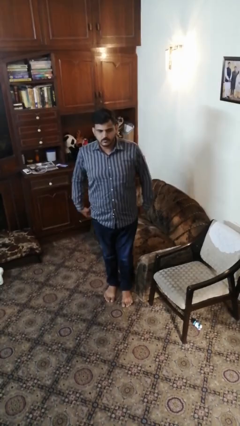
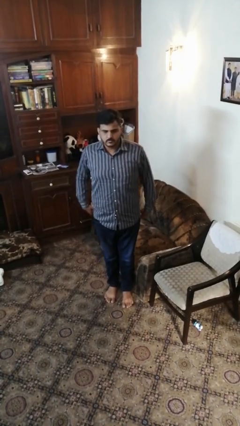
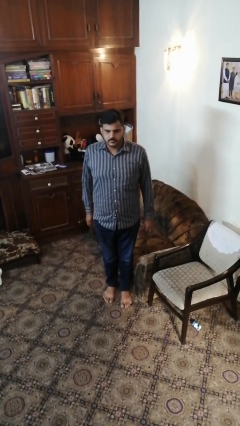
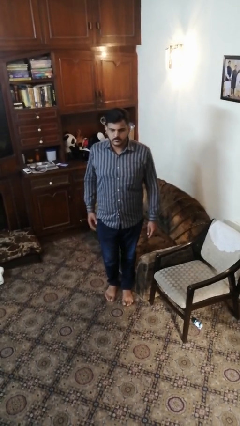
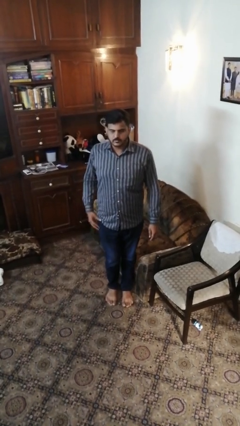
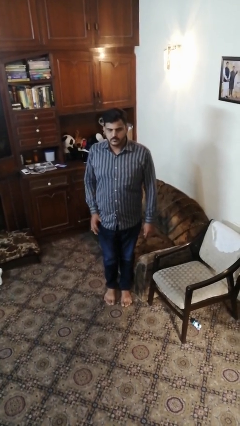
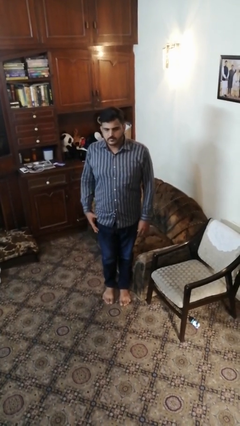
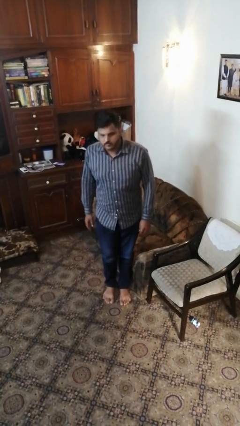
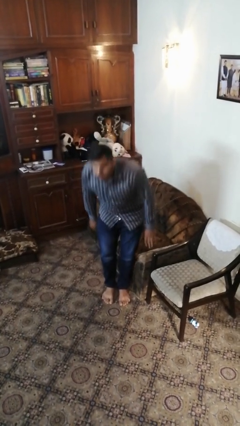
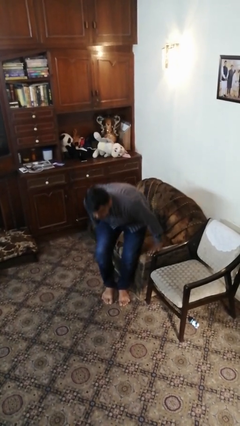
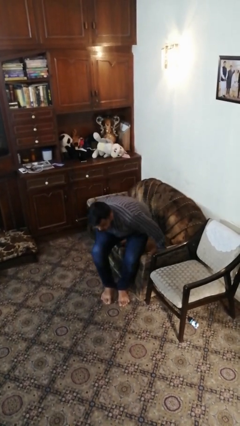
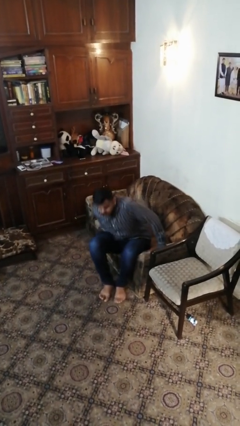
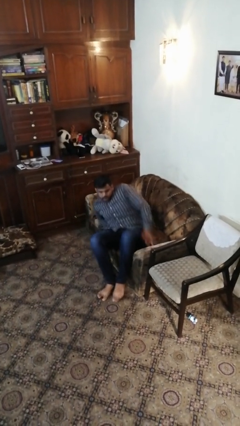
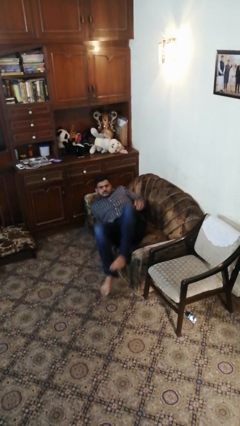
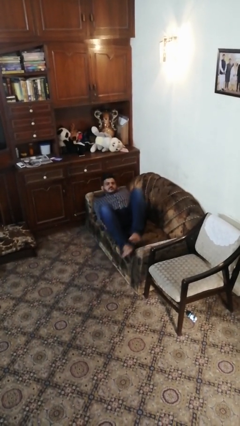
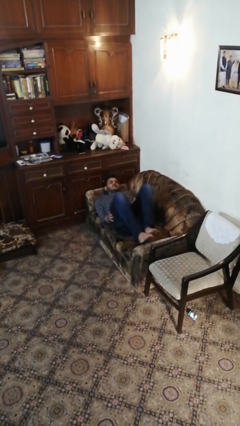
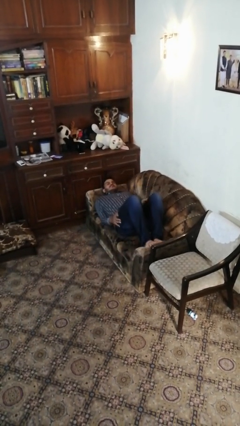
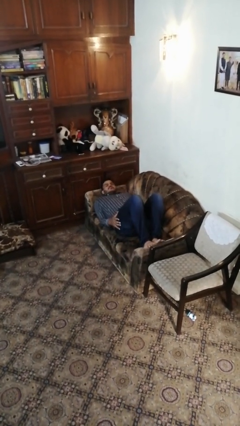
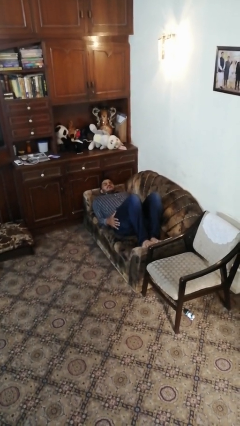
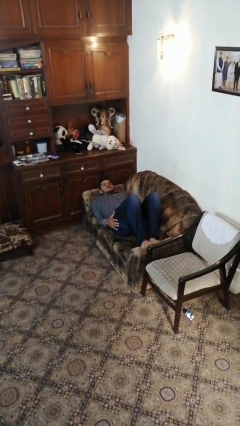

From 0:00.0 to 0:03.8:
person lies down on couch

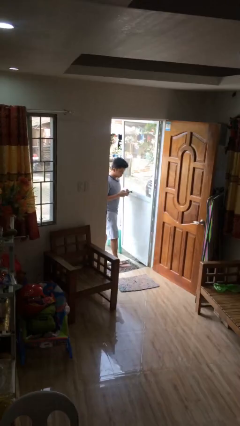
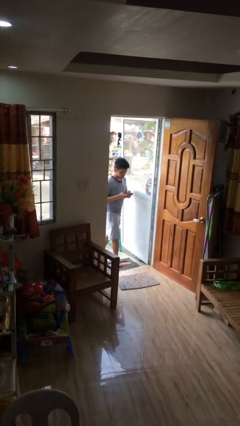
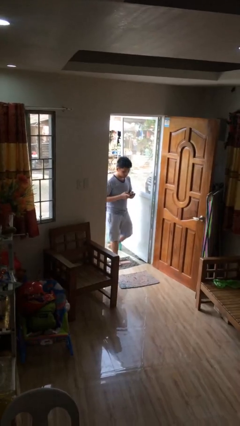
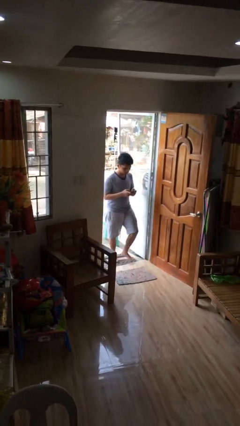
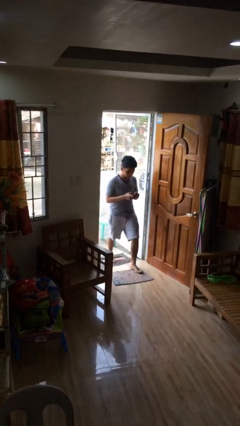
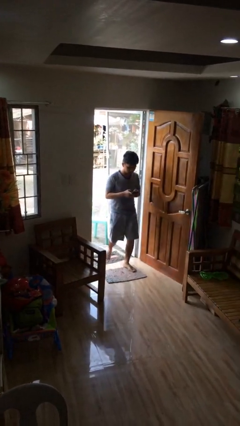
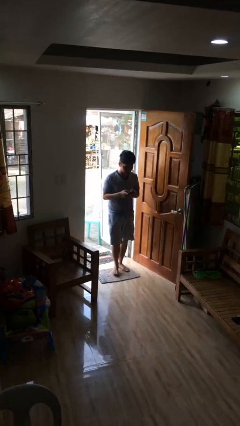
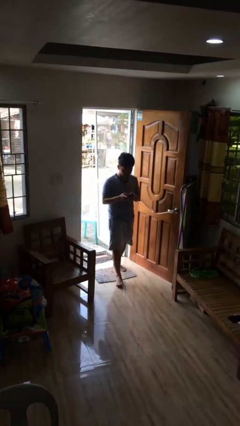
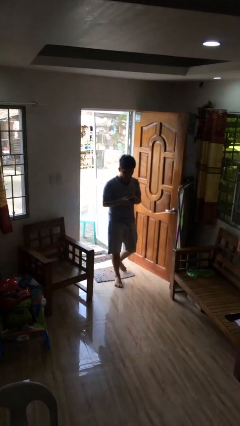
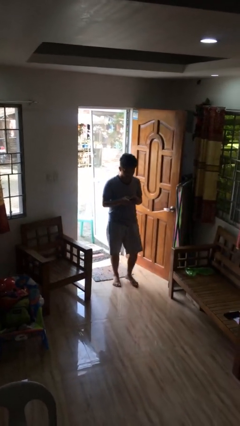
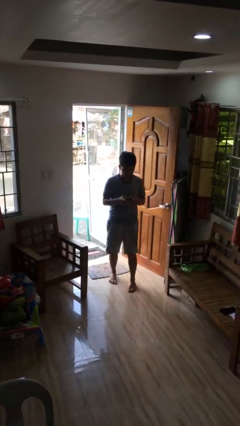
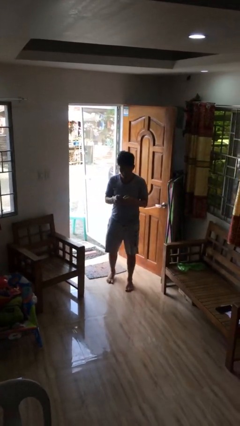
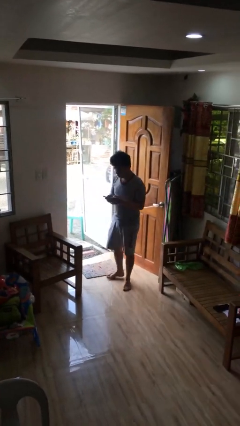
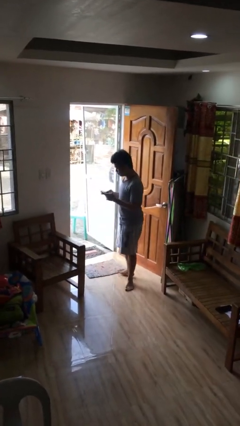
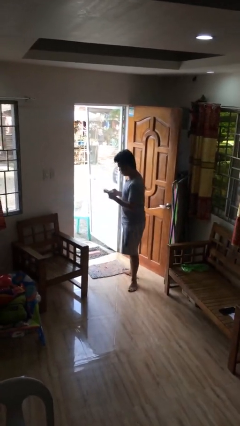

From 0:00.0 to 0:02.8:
person enters scene through structure

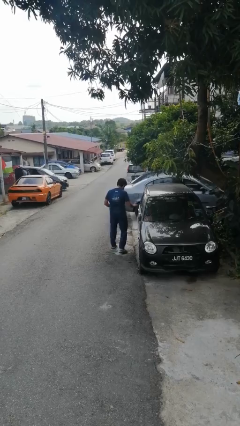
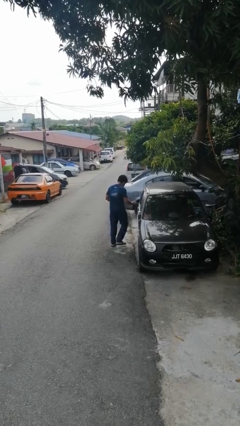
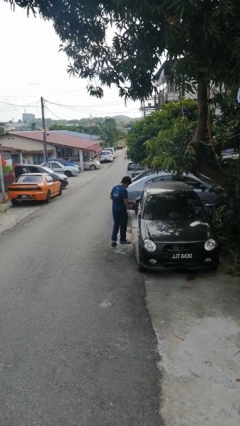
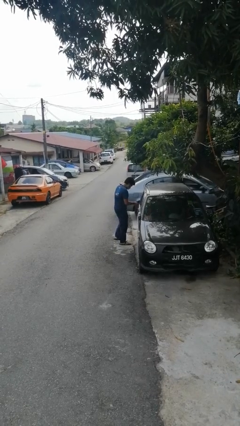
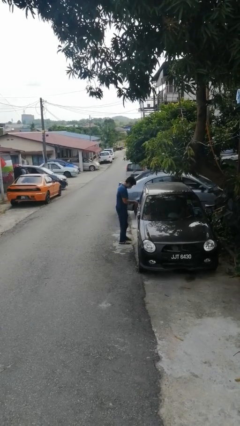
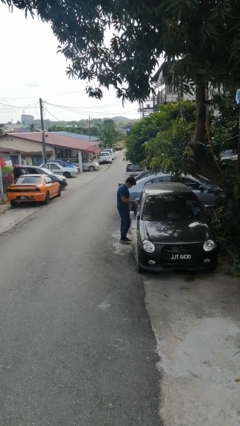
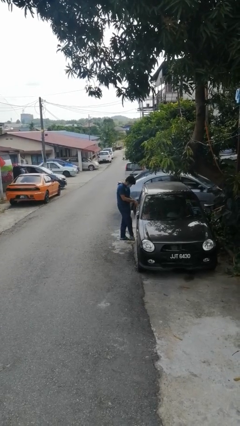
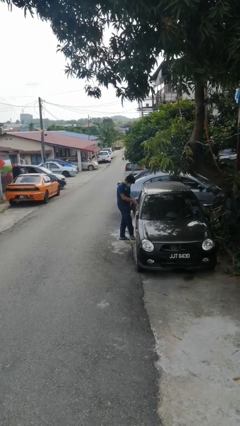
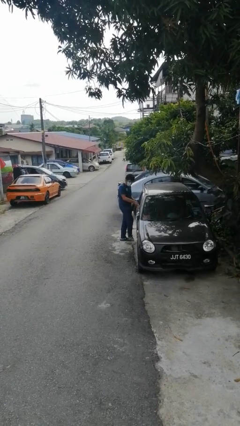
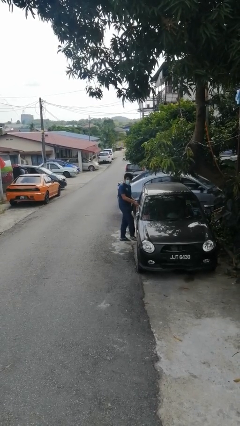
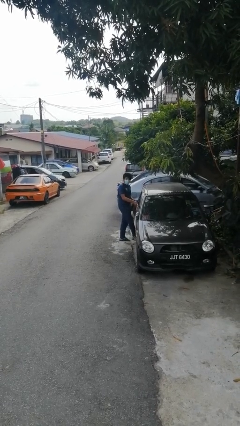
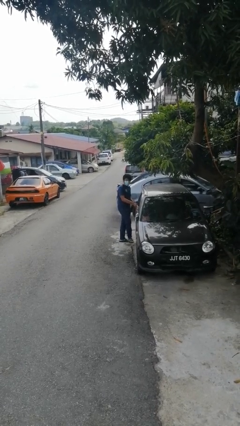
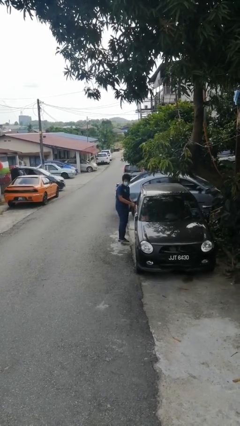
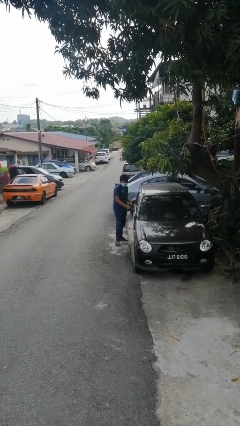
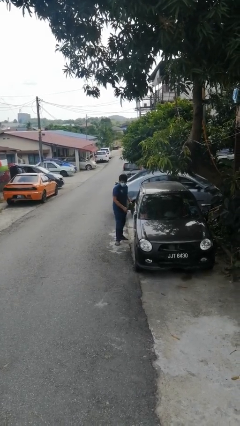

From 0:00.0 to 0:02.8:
person kicks car tires

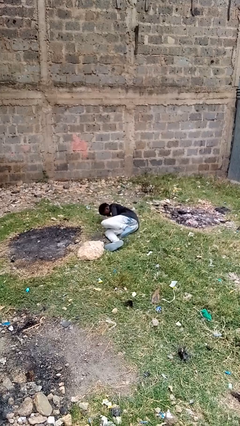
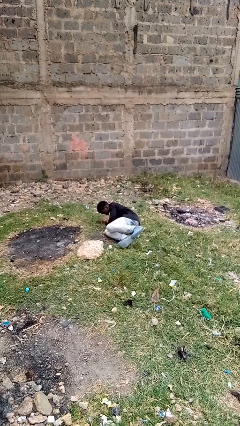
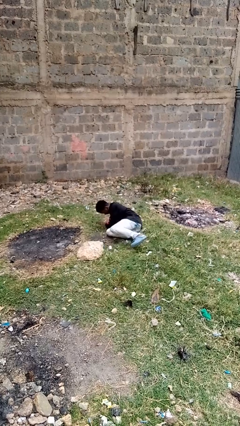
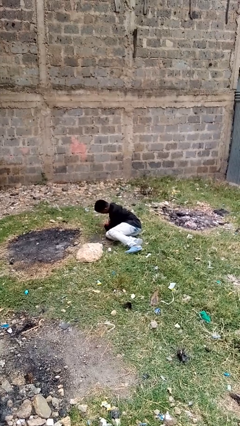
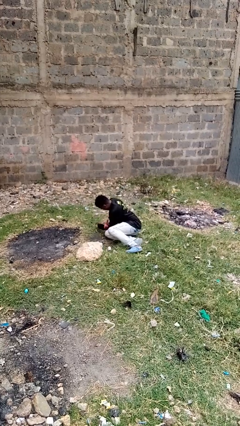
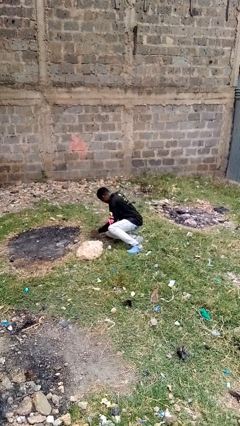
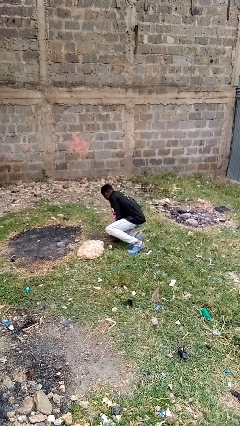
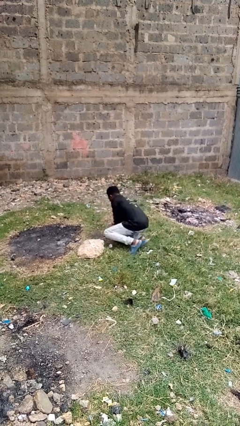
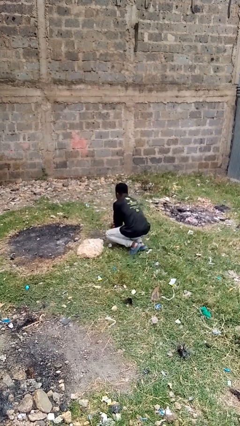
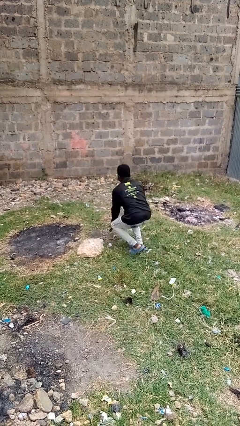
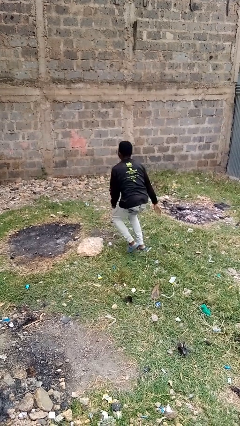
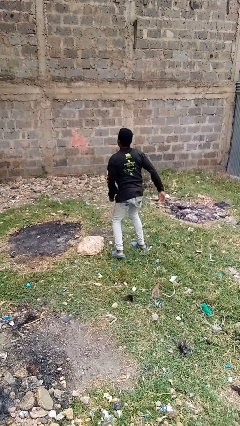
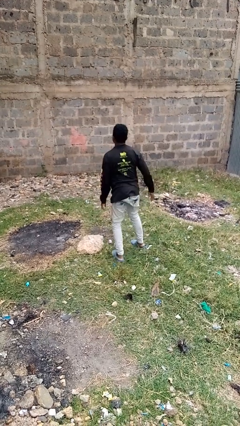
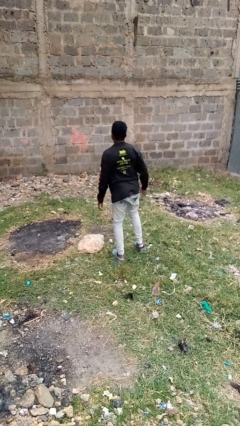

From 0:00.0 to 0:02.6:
person stands up from floor

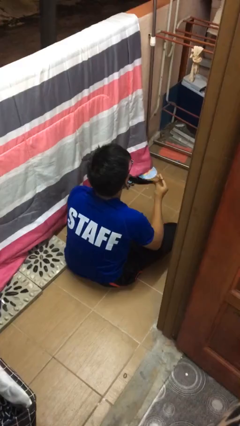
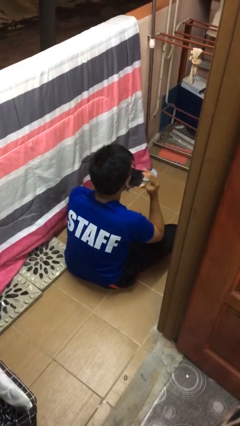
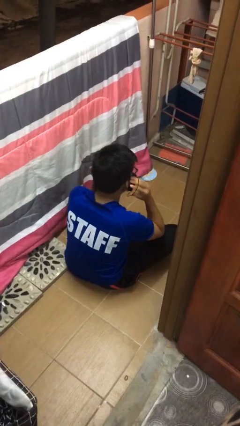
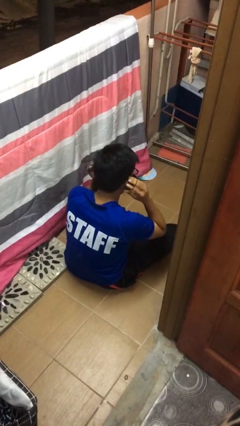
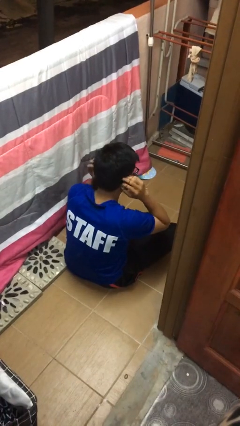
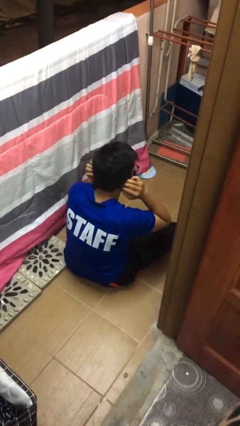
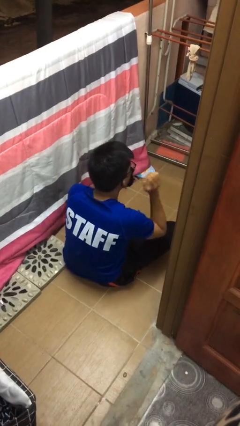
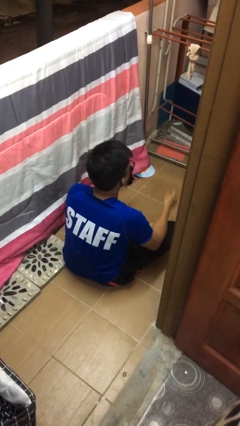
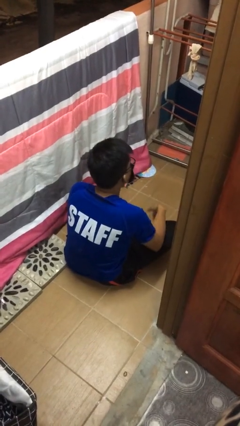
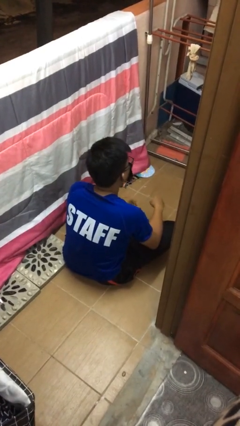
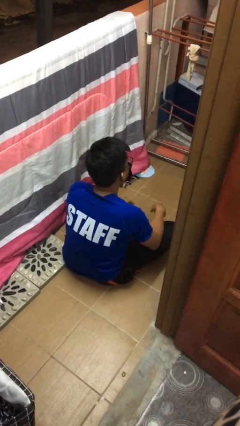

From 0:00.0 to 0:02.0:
person puts on facemask

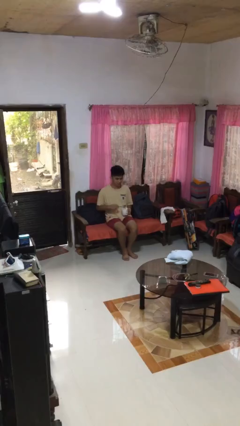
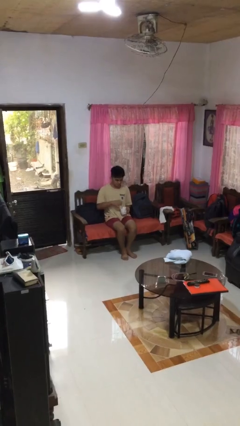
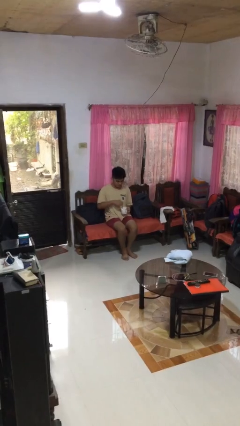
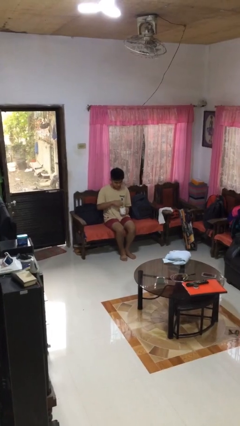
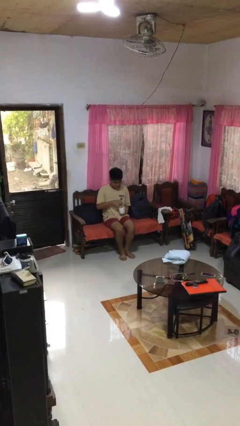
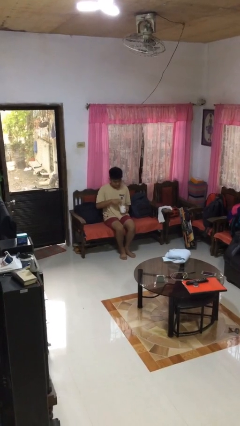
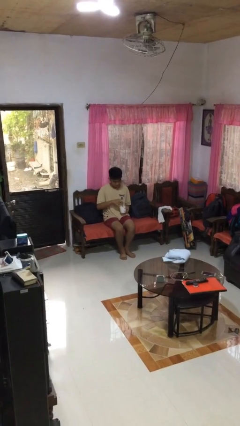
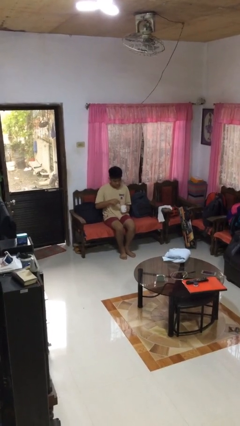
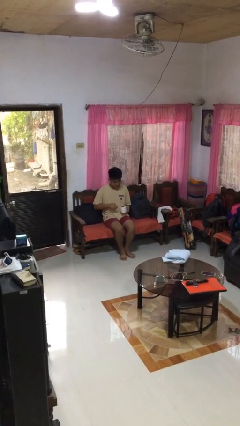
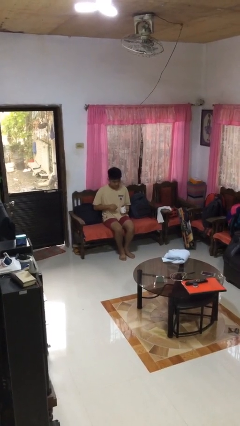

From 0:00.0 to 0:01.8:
person stirs mug

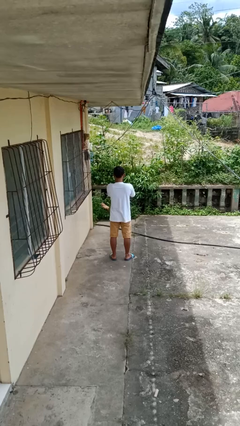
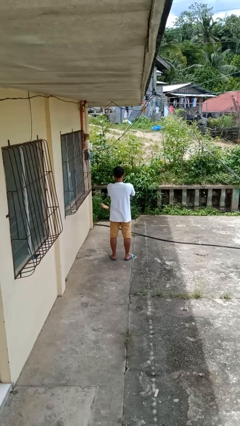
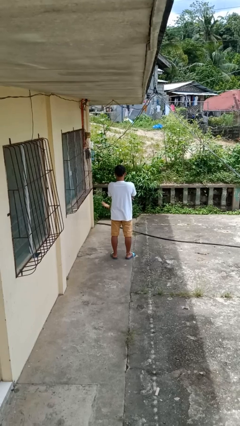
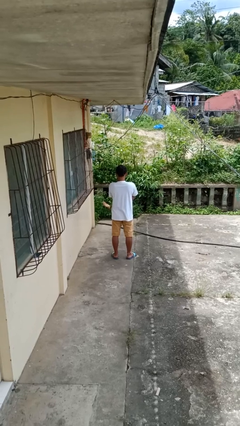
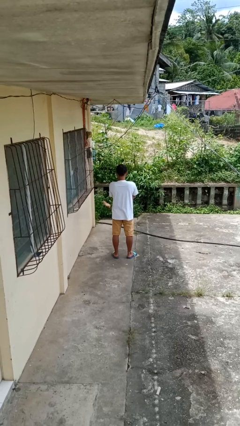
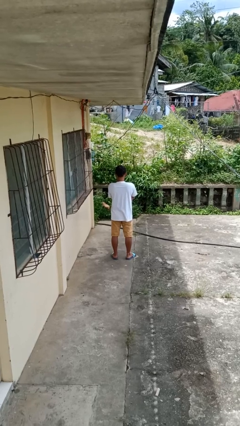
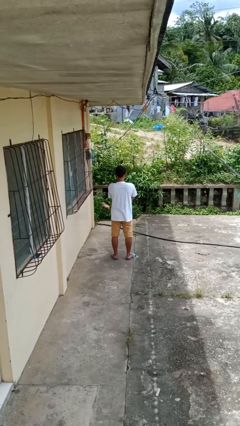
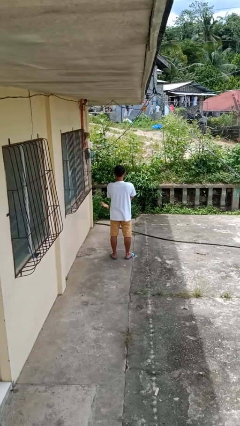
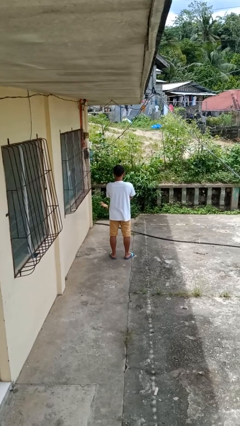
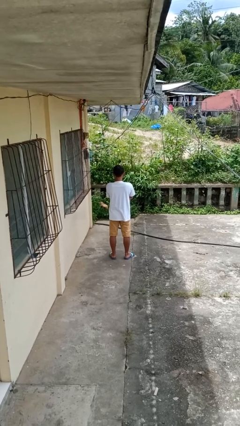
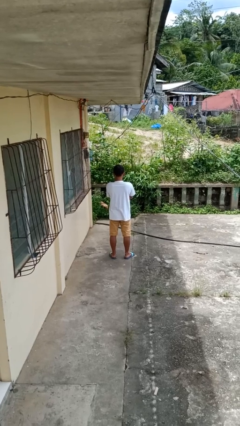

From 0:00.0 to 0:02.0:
person crosses arms
